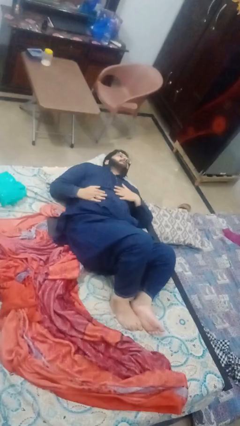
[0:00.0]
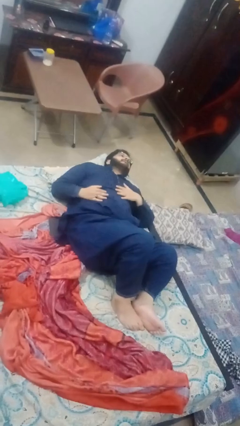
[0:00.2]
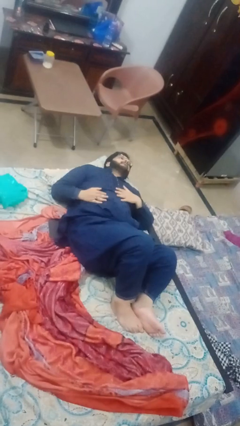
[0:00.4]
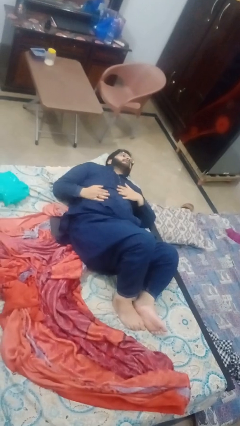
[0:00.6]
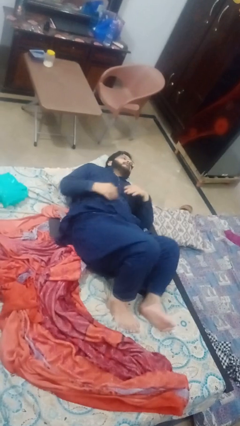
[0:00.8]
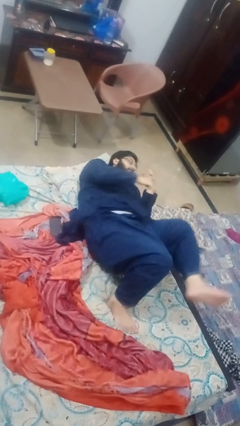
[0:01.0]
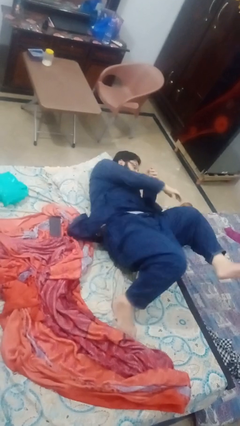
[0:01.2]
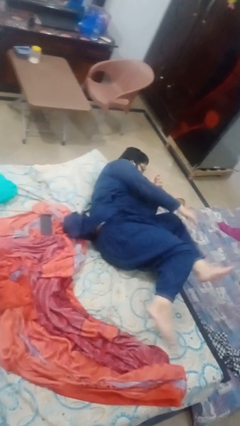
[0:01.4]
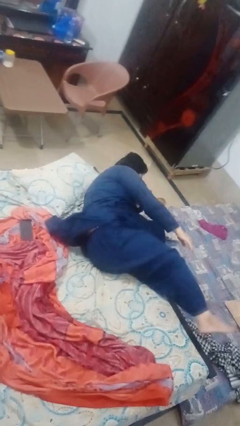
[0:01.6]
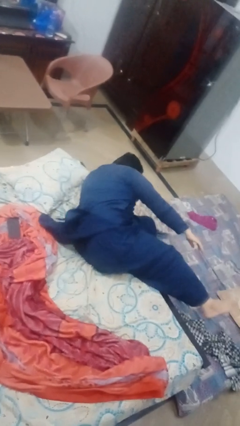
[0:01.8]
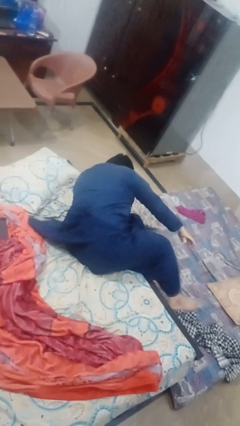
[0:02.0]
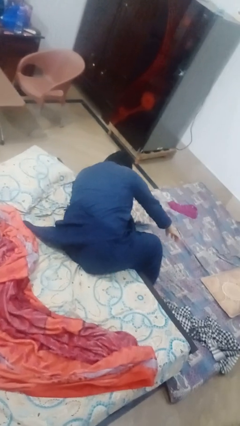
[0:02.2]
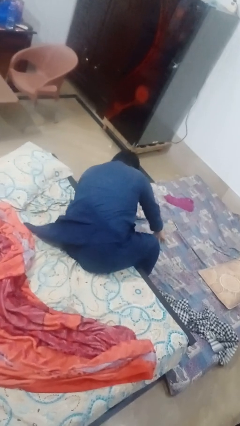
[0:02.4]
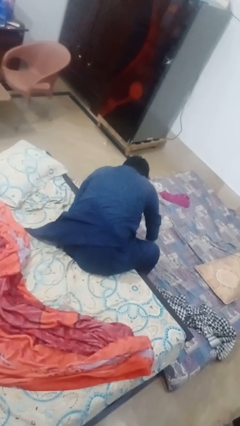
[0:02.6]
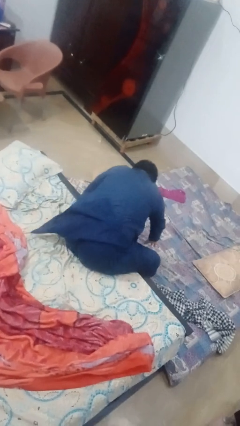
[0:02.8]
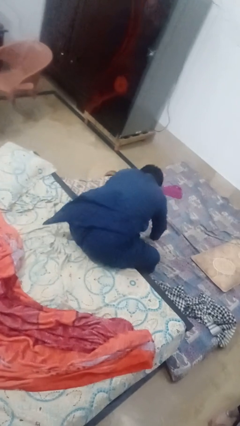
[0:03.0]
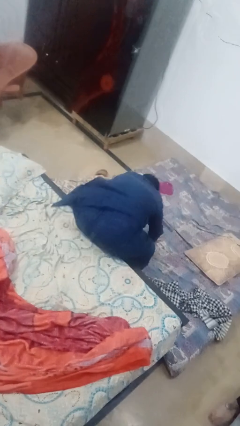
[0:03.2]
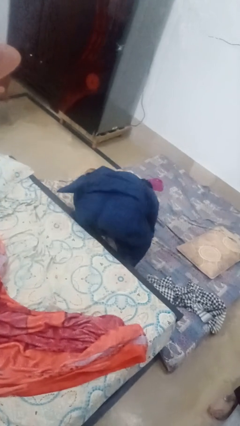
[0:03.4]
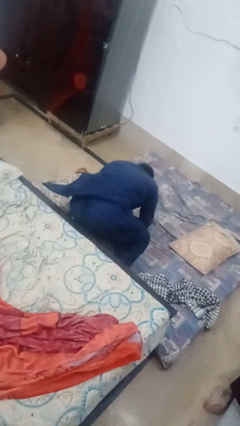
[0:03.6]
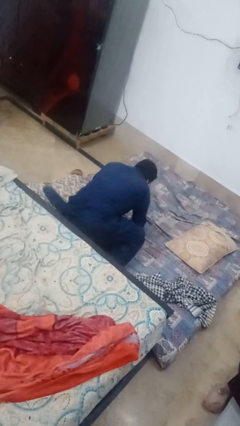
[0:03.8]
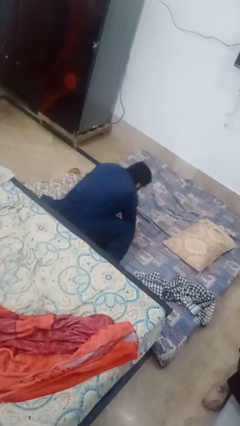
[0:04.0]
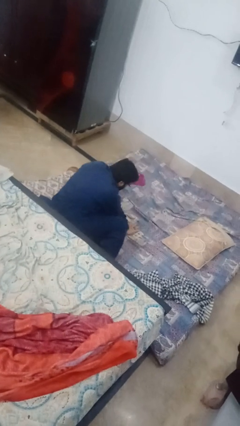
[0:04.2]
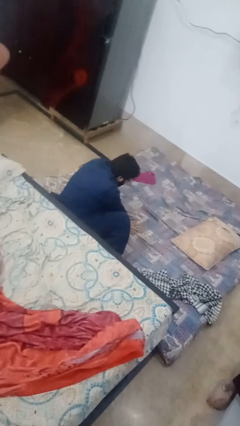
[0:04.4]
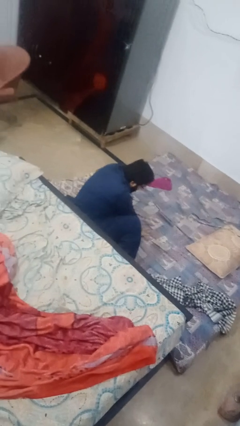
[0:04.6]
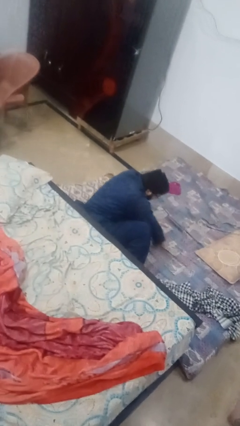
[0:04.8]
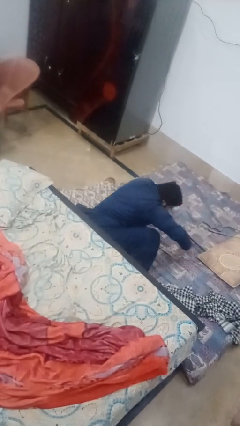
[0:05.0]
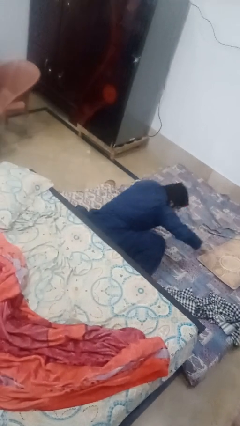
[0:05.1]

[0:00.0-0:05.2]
person falls from bed

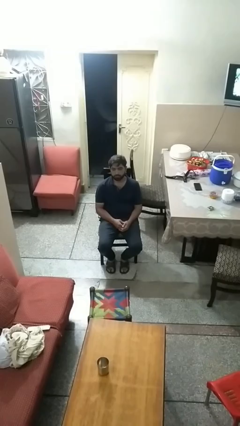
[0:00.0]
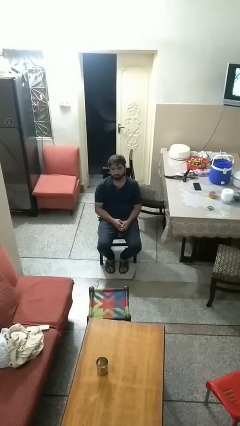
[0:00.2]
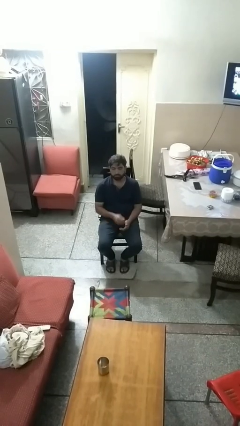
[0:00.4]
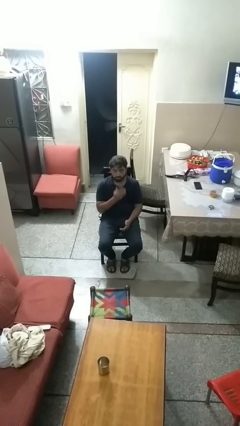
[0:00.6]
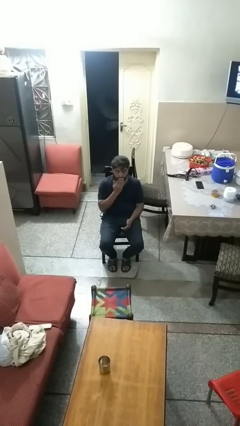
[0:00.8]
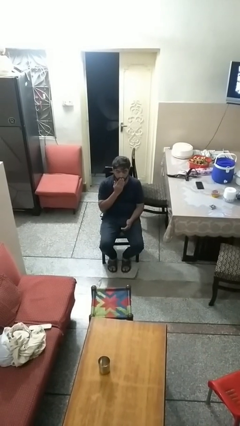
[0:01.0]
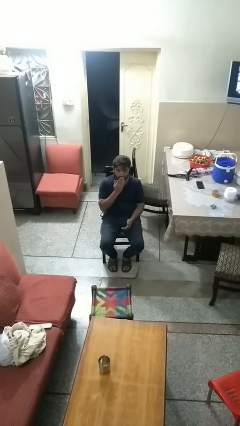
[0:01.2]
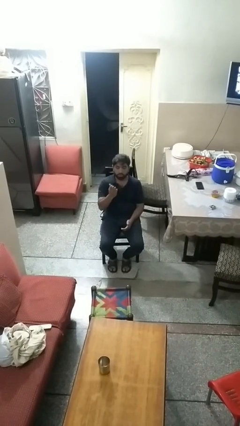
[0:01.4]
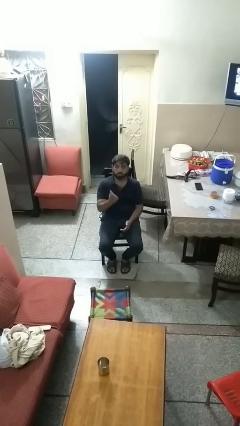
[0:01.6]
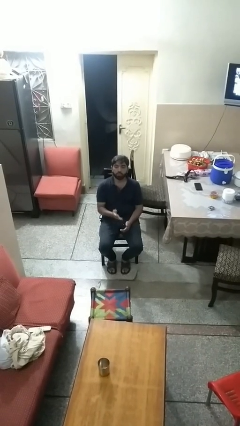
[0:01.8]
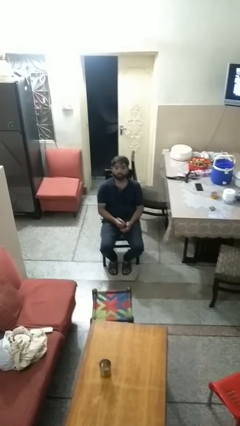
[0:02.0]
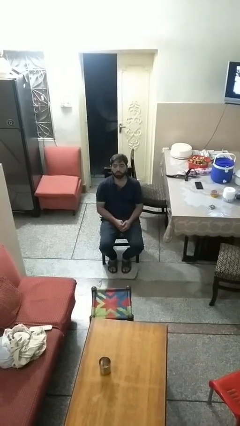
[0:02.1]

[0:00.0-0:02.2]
person gestures blow kiss

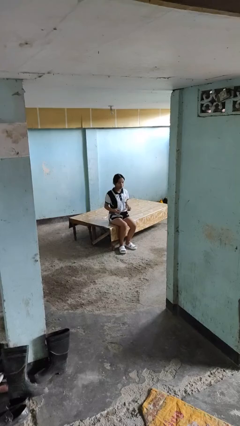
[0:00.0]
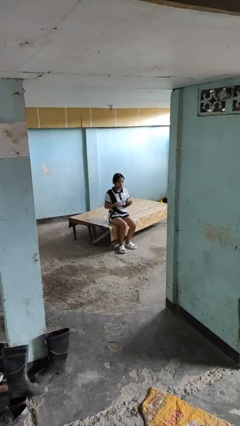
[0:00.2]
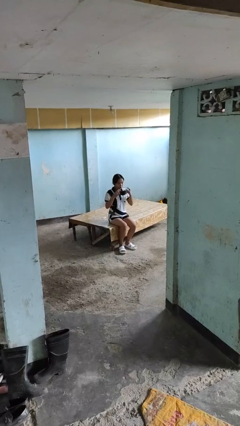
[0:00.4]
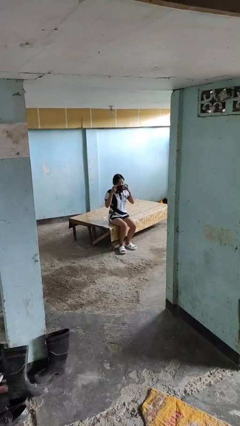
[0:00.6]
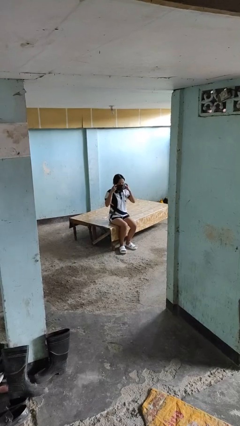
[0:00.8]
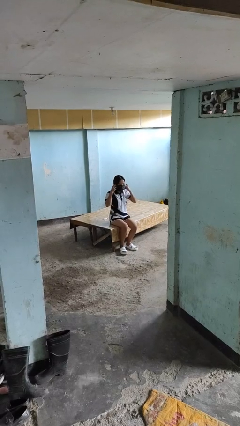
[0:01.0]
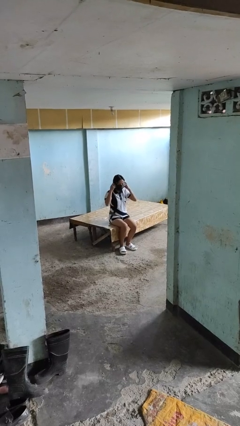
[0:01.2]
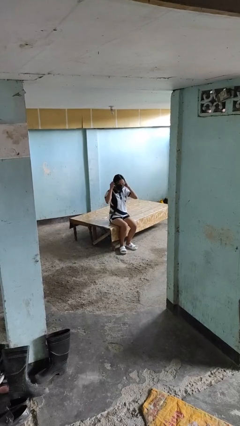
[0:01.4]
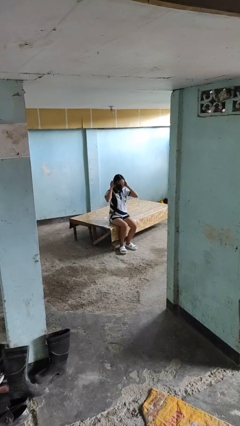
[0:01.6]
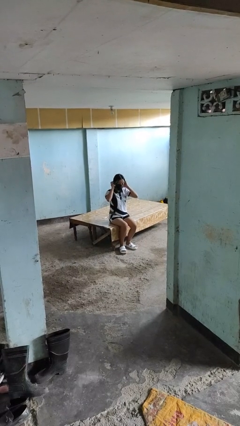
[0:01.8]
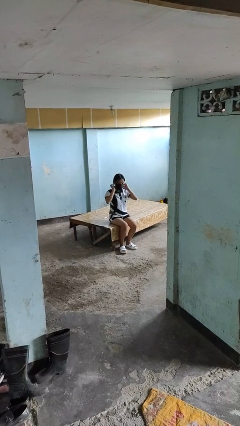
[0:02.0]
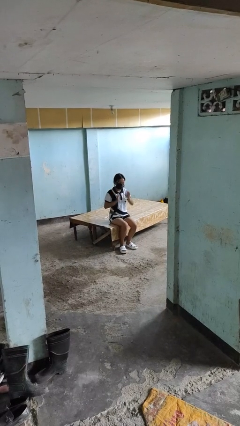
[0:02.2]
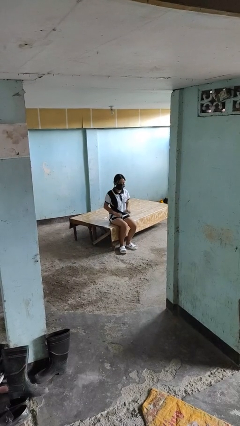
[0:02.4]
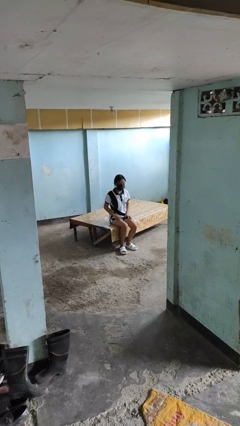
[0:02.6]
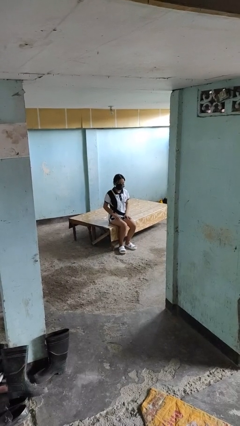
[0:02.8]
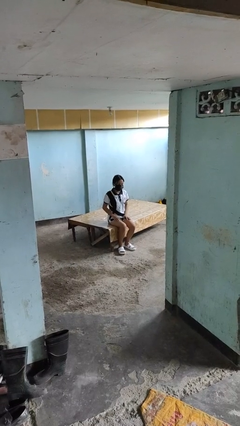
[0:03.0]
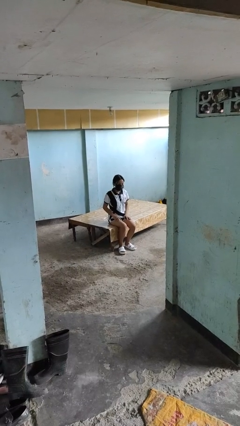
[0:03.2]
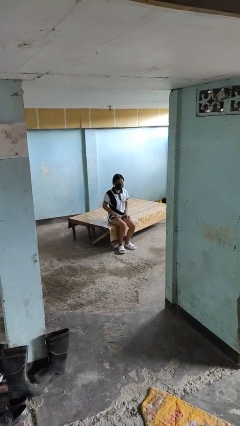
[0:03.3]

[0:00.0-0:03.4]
person puts on facemask

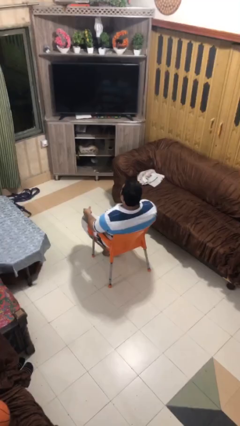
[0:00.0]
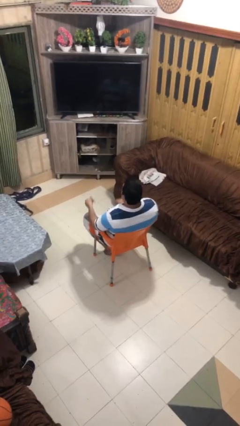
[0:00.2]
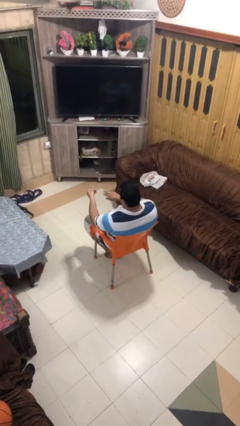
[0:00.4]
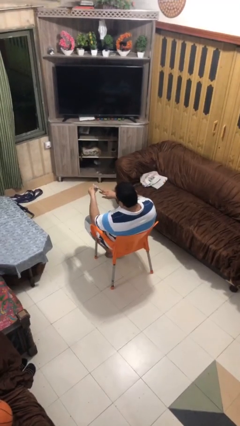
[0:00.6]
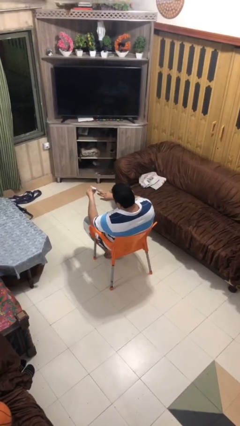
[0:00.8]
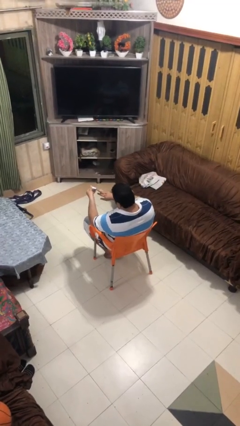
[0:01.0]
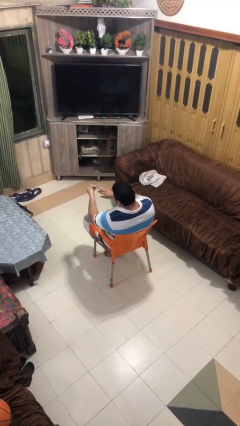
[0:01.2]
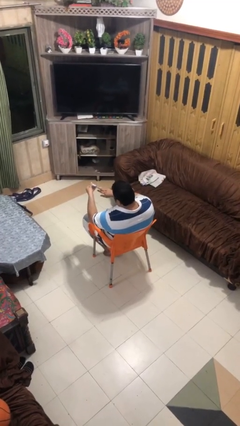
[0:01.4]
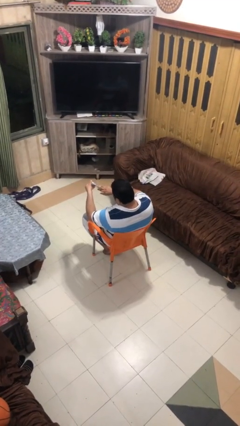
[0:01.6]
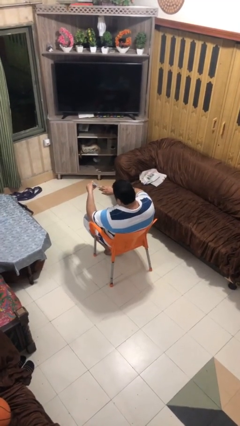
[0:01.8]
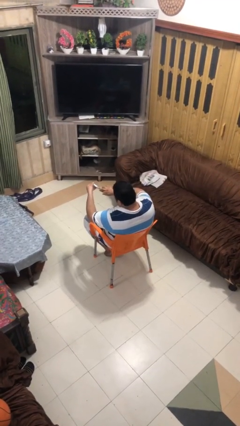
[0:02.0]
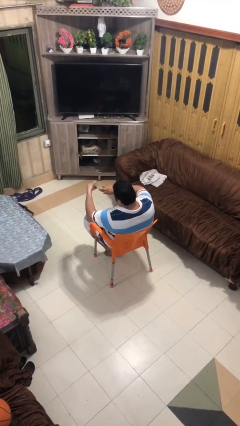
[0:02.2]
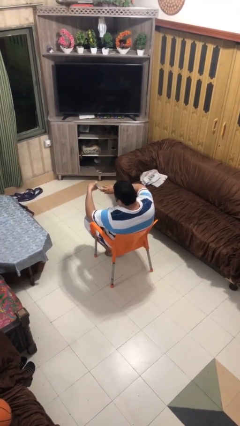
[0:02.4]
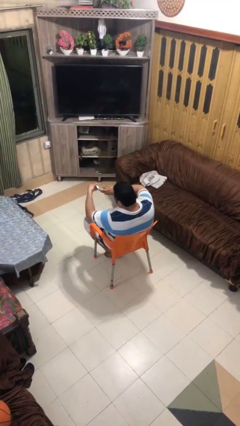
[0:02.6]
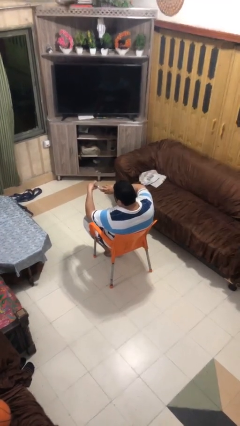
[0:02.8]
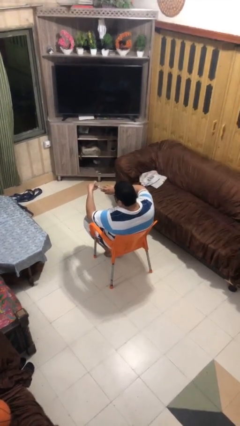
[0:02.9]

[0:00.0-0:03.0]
person clips fingernails

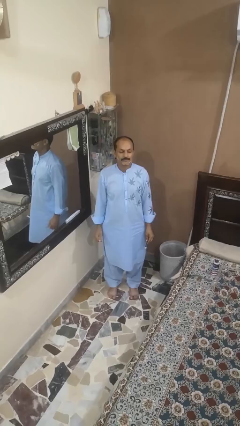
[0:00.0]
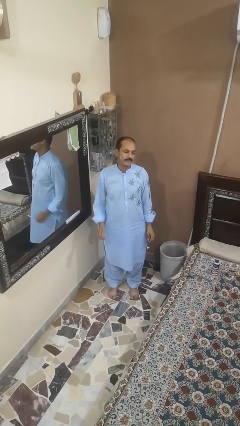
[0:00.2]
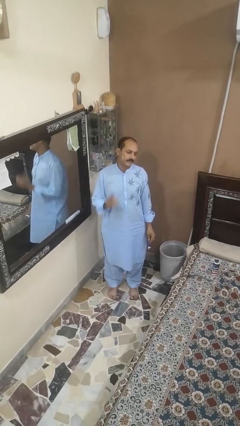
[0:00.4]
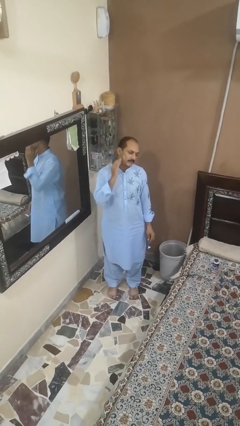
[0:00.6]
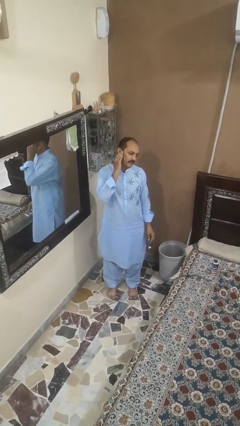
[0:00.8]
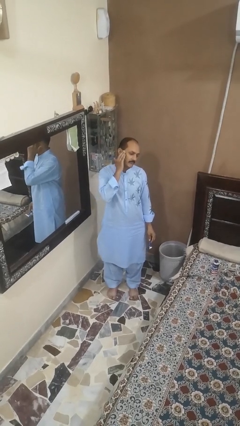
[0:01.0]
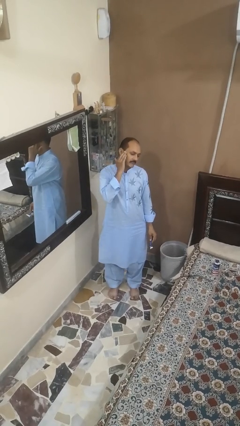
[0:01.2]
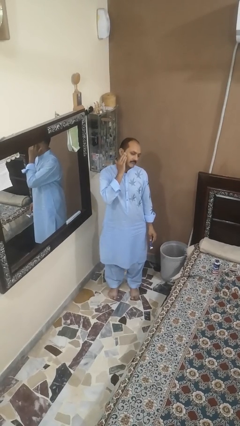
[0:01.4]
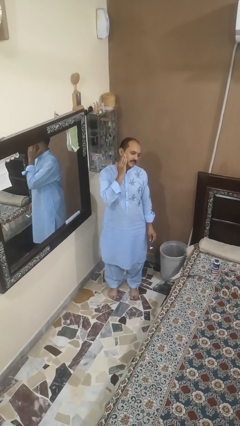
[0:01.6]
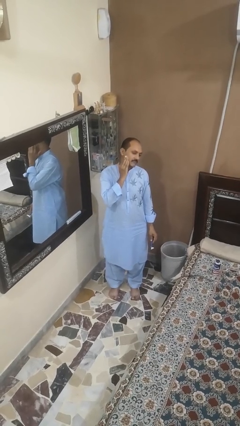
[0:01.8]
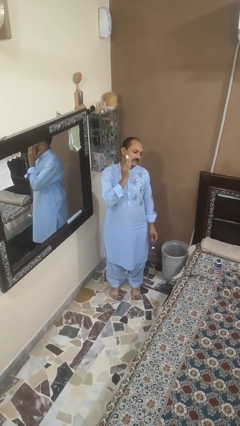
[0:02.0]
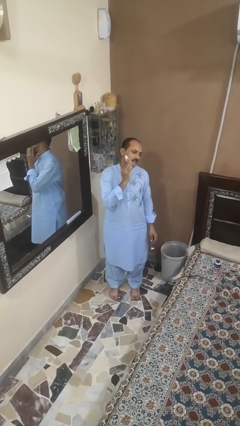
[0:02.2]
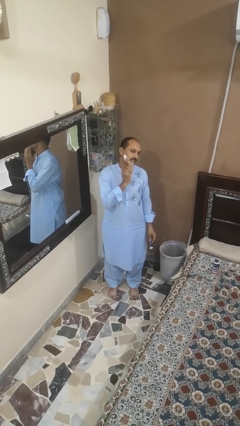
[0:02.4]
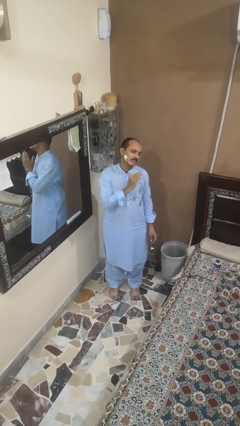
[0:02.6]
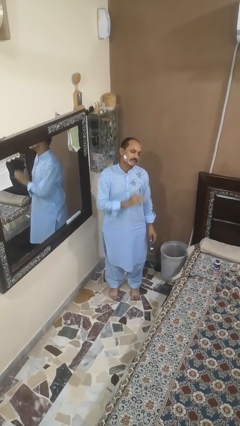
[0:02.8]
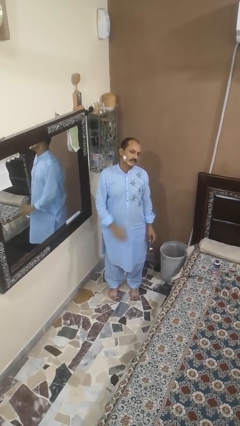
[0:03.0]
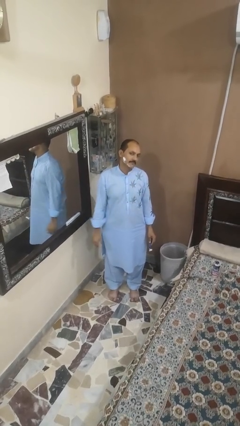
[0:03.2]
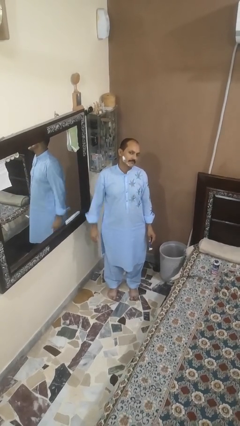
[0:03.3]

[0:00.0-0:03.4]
person applies shaving cream

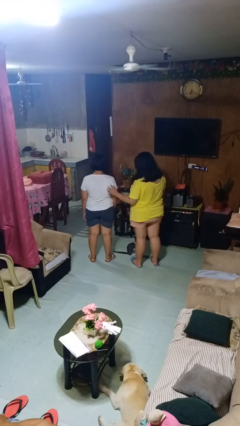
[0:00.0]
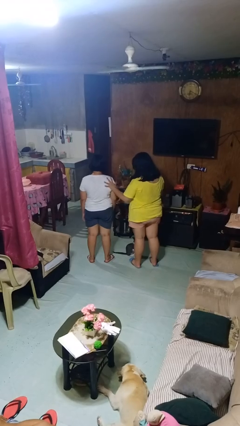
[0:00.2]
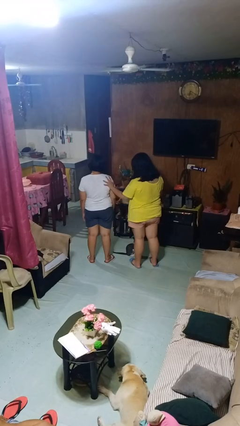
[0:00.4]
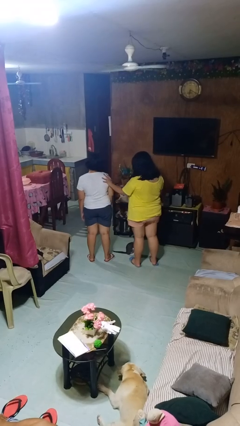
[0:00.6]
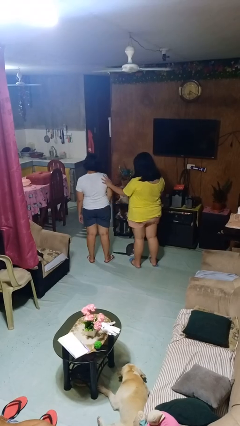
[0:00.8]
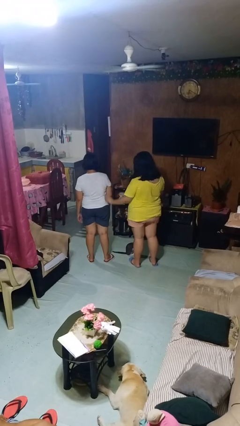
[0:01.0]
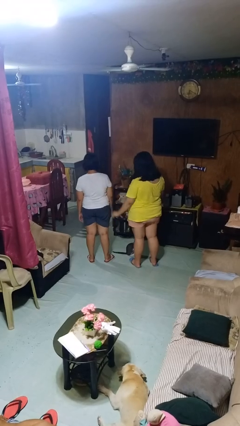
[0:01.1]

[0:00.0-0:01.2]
person shoves person
